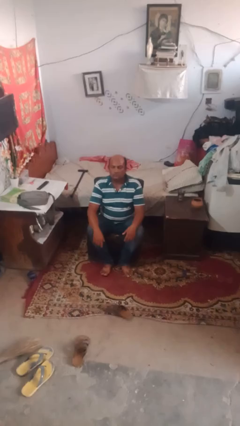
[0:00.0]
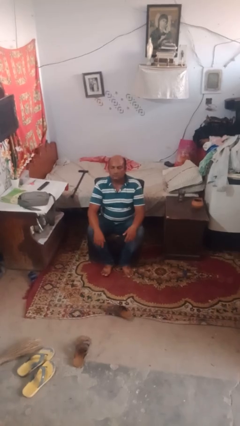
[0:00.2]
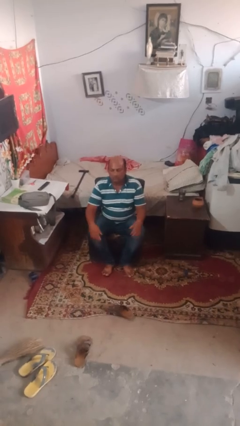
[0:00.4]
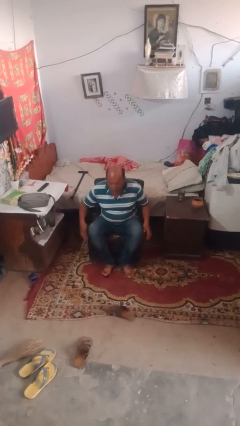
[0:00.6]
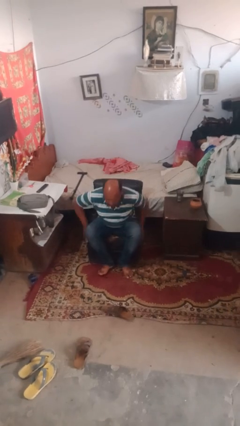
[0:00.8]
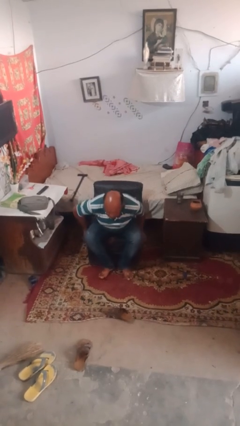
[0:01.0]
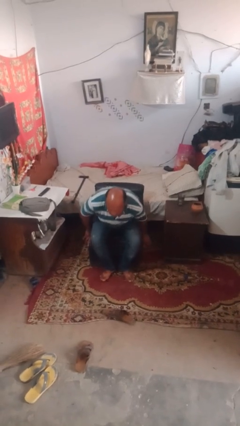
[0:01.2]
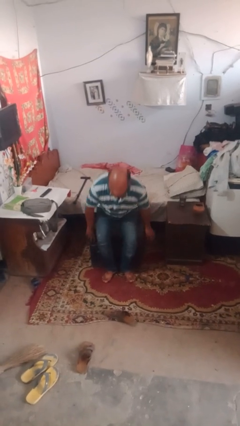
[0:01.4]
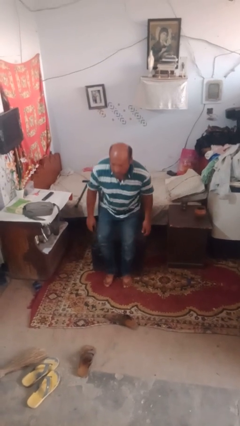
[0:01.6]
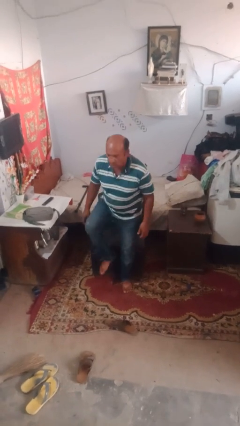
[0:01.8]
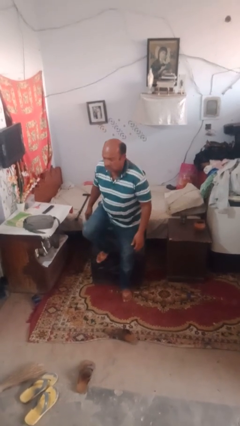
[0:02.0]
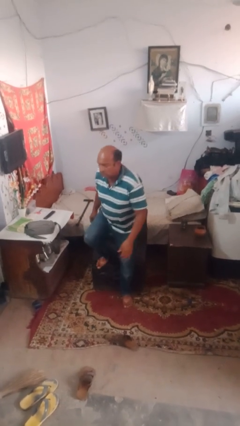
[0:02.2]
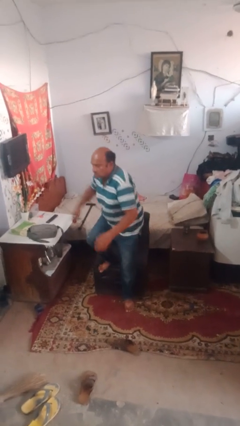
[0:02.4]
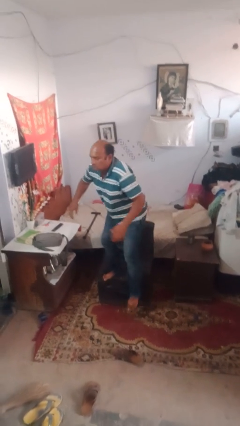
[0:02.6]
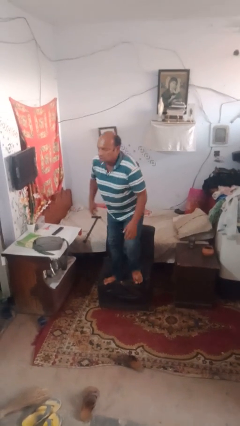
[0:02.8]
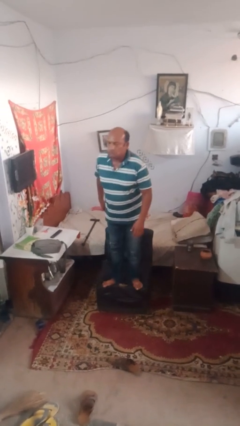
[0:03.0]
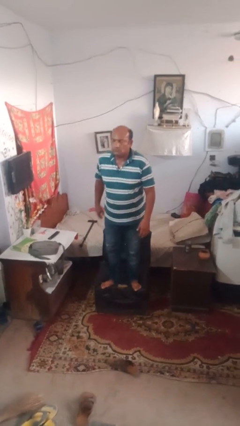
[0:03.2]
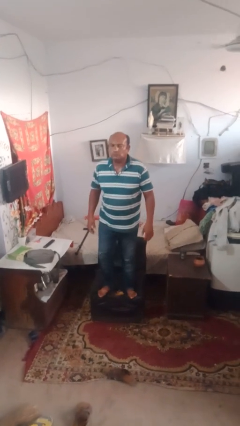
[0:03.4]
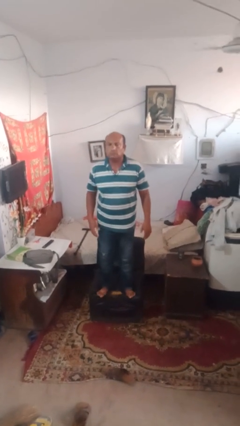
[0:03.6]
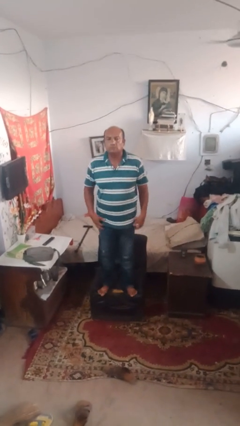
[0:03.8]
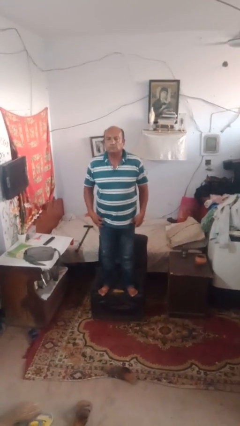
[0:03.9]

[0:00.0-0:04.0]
person stands up

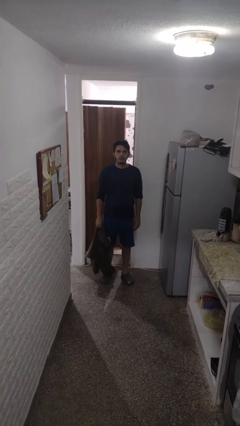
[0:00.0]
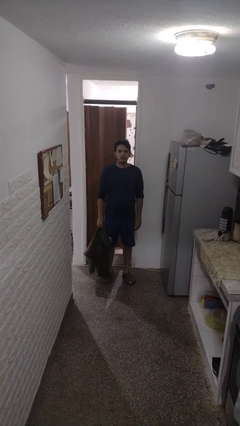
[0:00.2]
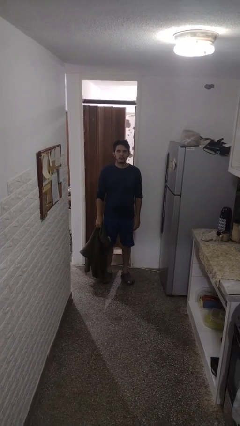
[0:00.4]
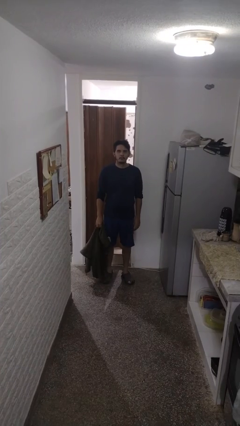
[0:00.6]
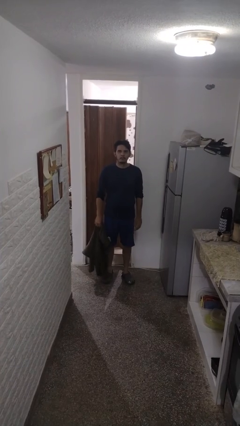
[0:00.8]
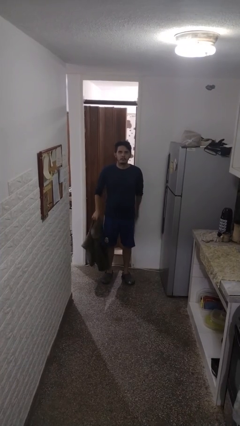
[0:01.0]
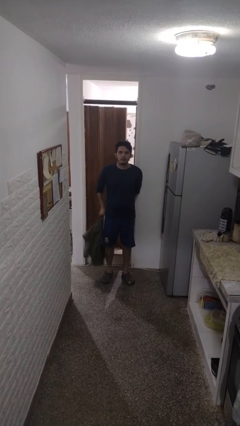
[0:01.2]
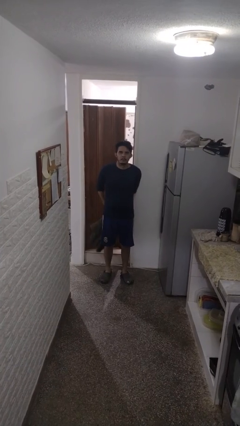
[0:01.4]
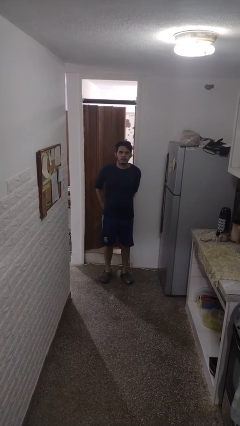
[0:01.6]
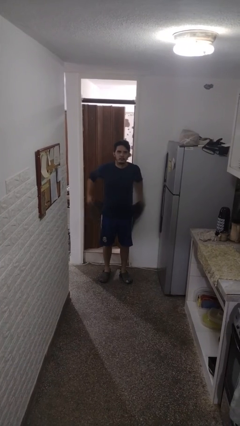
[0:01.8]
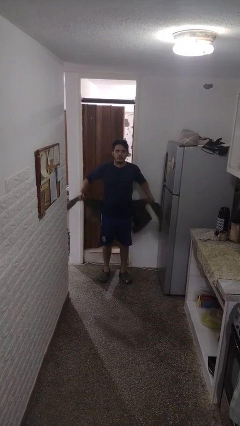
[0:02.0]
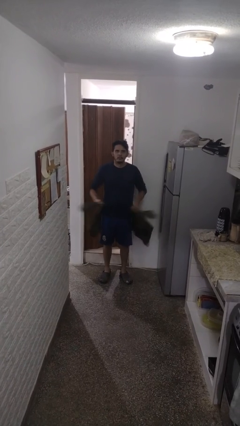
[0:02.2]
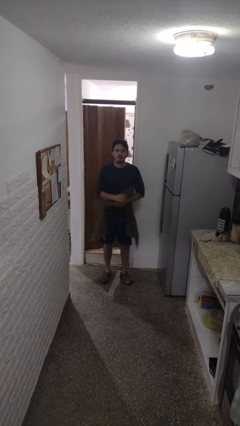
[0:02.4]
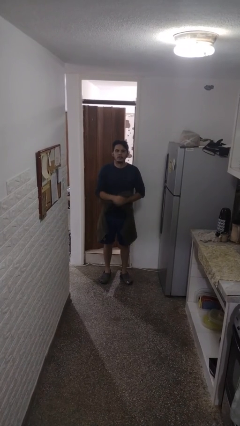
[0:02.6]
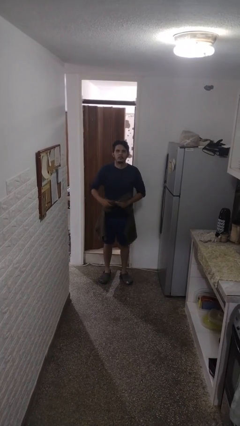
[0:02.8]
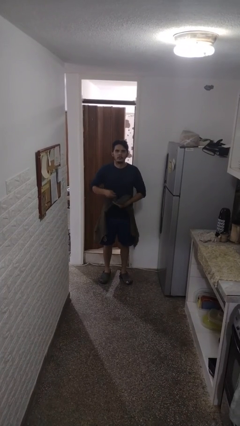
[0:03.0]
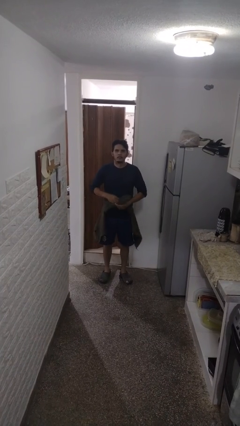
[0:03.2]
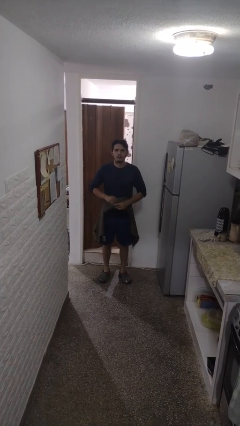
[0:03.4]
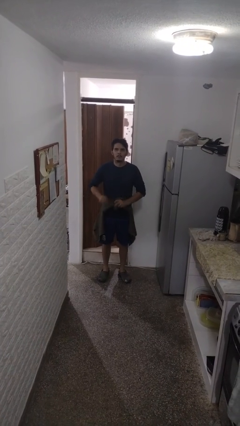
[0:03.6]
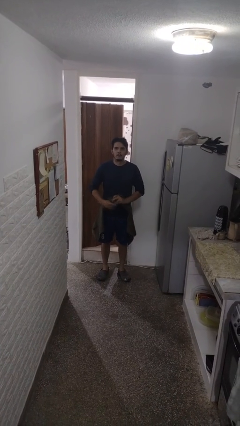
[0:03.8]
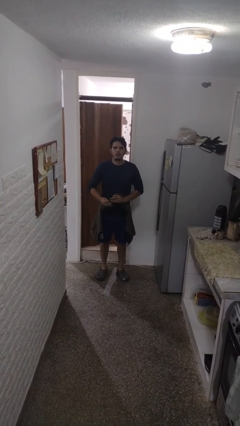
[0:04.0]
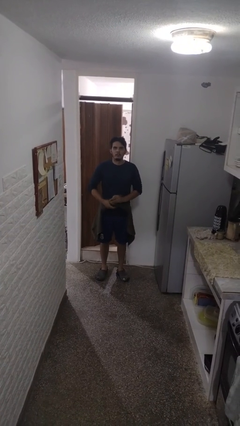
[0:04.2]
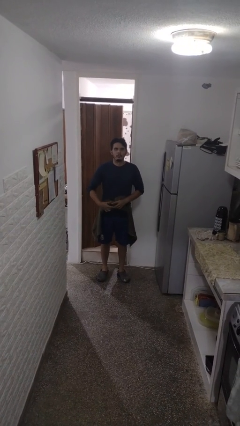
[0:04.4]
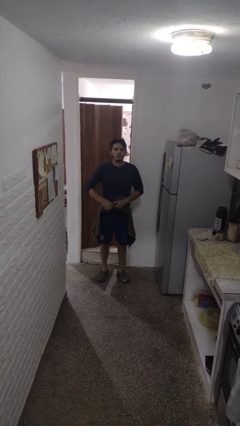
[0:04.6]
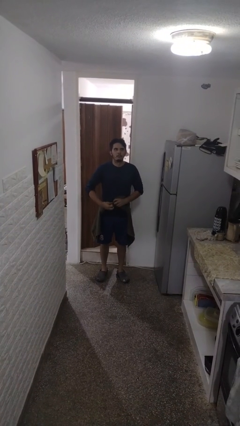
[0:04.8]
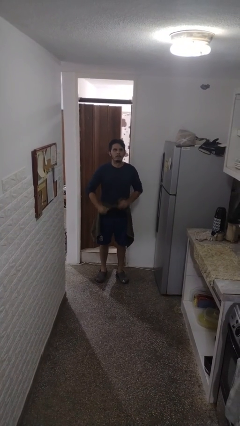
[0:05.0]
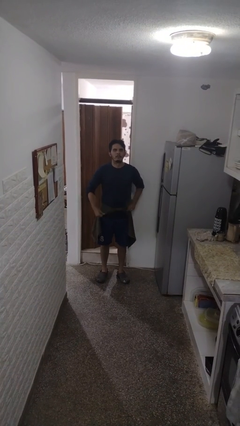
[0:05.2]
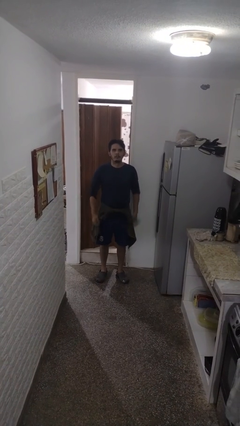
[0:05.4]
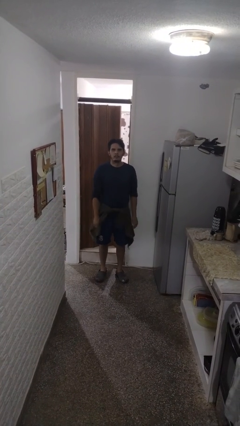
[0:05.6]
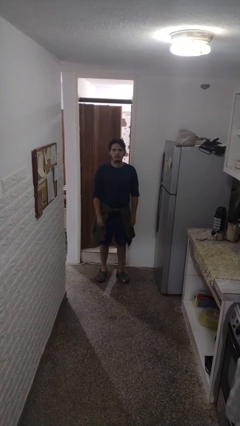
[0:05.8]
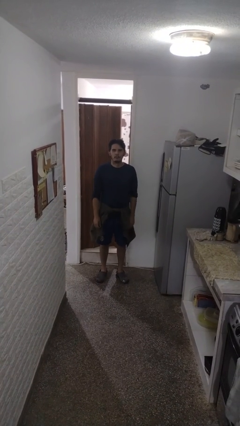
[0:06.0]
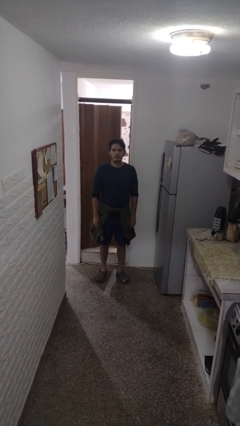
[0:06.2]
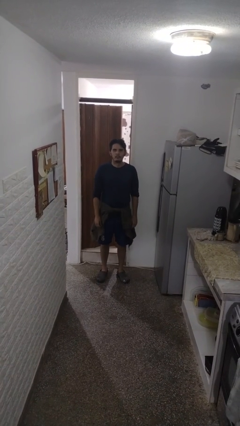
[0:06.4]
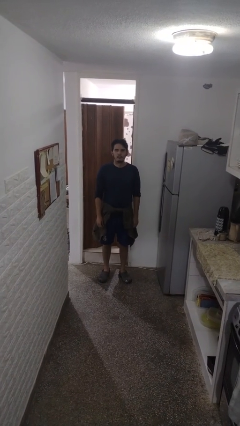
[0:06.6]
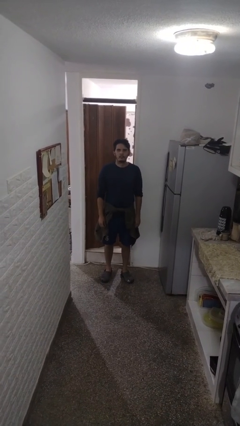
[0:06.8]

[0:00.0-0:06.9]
person ties jacket around waist

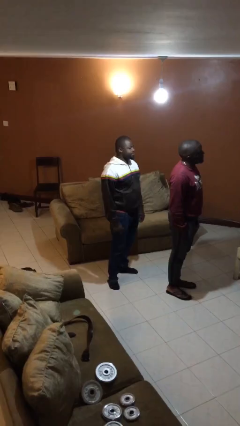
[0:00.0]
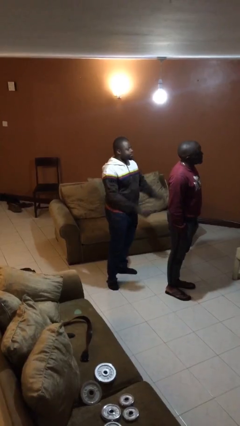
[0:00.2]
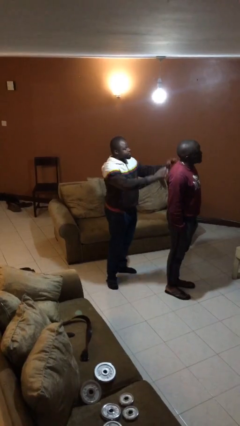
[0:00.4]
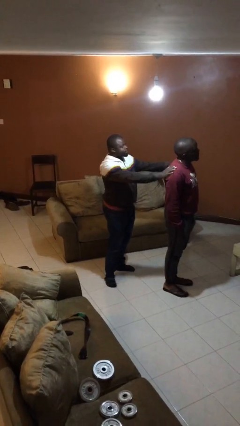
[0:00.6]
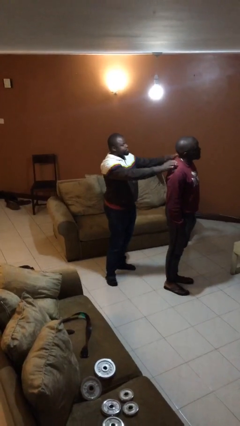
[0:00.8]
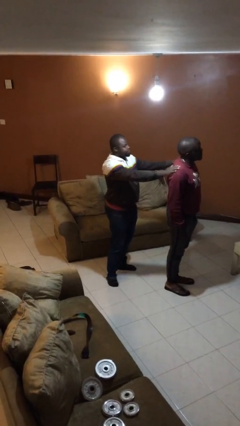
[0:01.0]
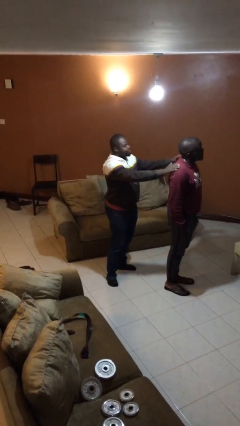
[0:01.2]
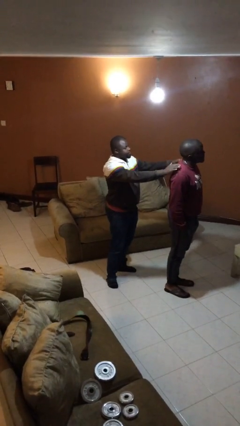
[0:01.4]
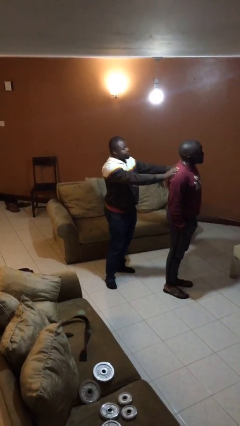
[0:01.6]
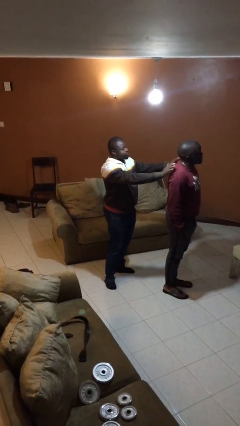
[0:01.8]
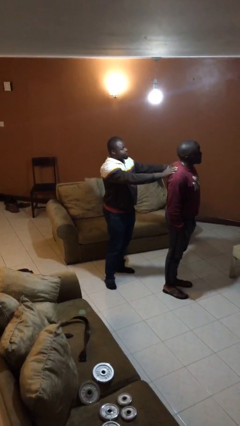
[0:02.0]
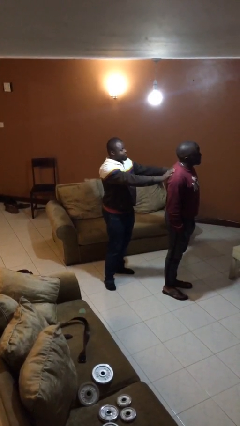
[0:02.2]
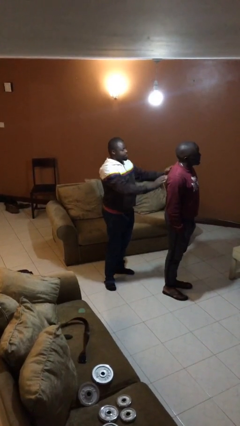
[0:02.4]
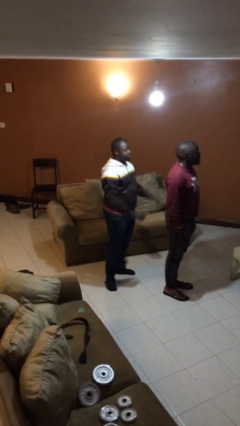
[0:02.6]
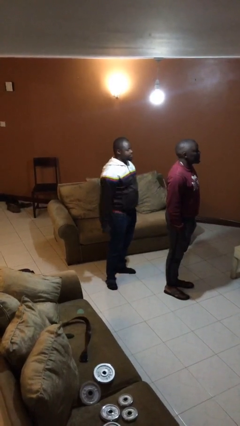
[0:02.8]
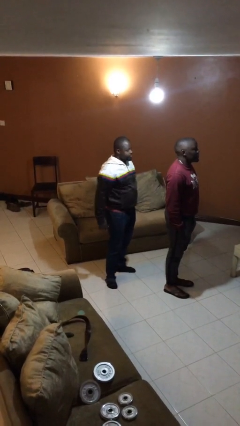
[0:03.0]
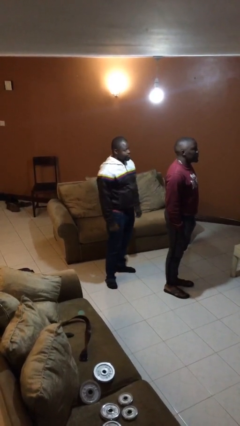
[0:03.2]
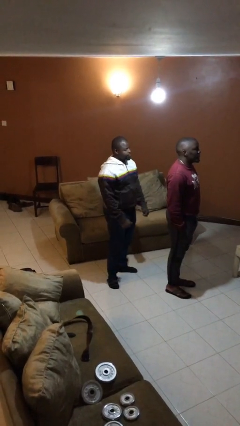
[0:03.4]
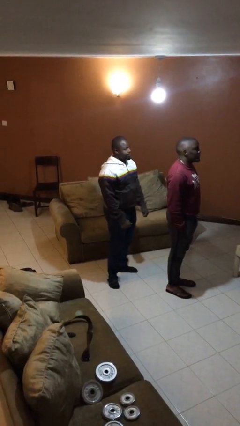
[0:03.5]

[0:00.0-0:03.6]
person pounds shoulders of person

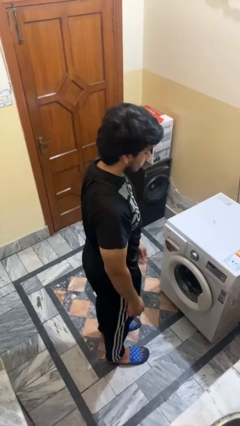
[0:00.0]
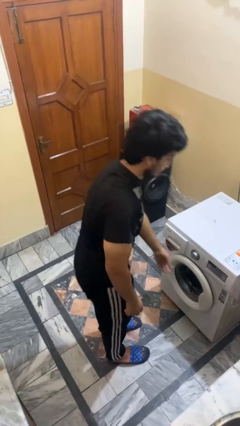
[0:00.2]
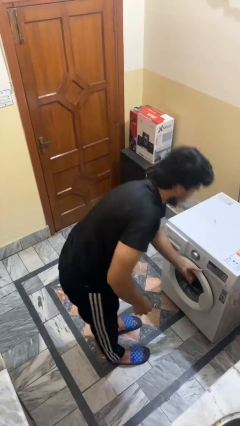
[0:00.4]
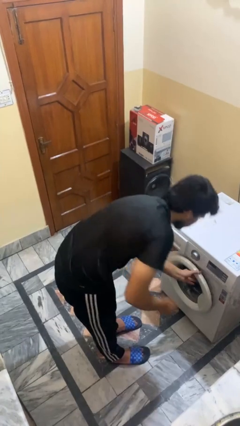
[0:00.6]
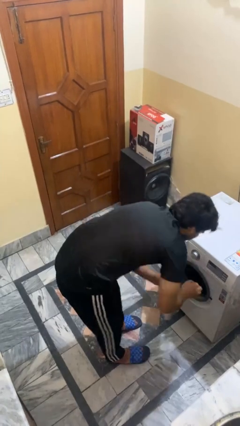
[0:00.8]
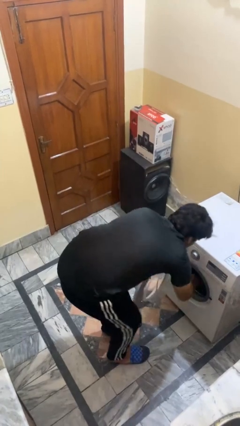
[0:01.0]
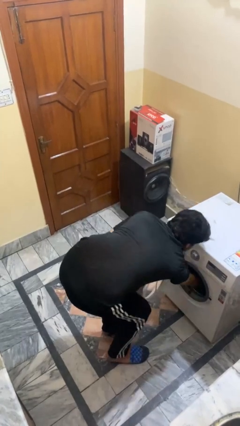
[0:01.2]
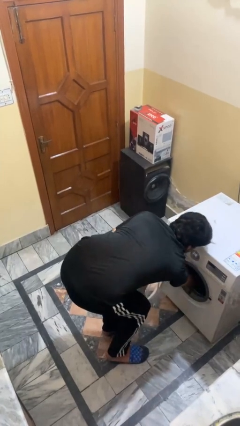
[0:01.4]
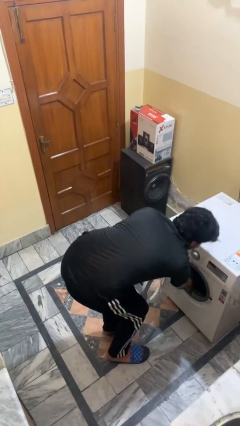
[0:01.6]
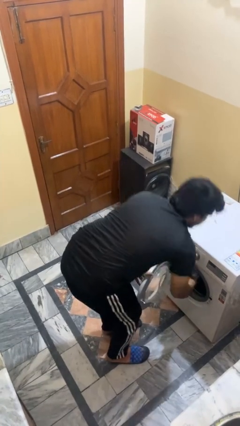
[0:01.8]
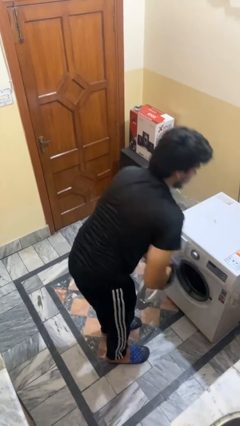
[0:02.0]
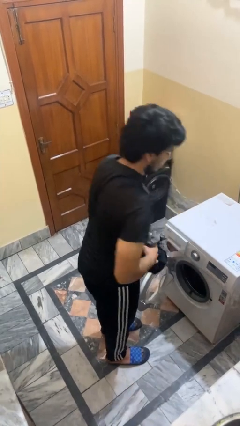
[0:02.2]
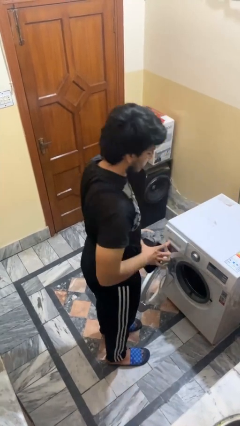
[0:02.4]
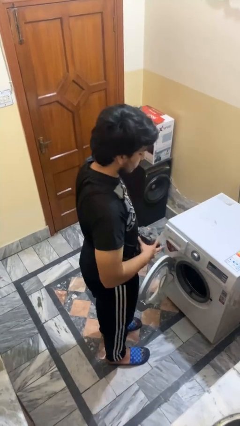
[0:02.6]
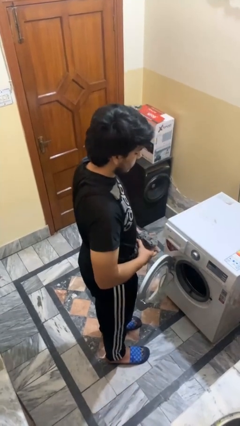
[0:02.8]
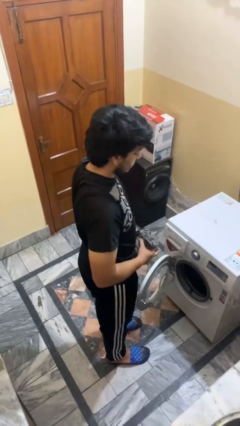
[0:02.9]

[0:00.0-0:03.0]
person unloads dryer

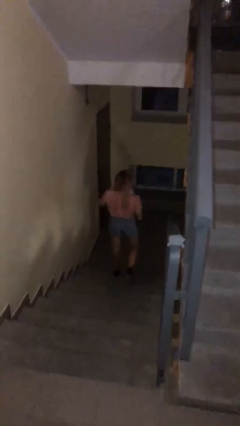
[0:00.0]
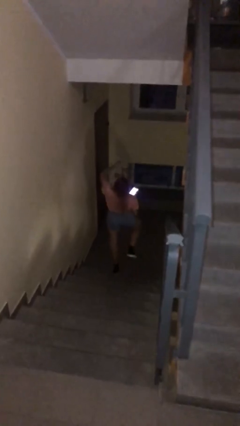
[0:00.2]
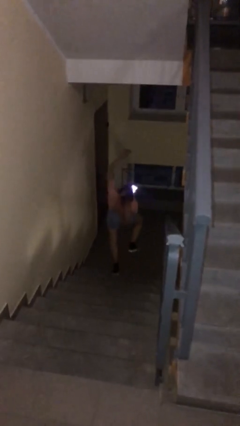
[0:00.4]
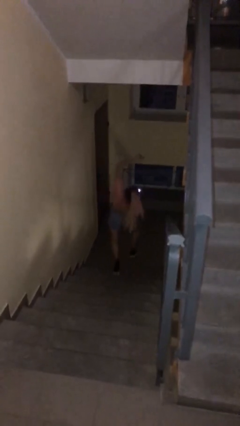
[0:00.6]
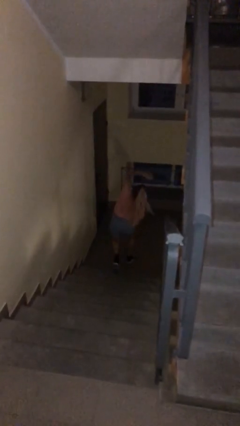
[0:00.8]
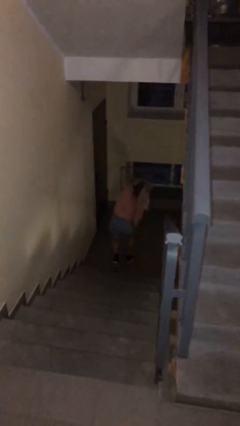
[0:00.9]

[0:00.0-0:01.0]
person trips on stair
